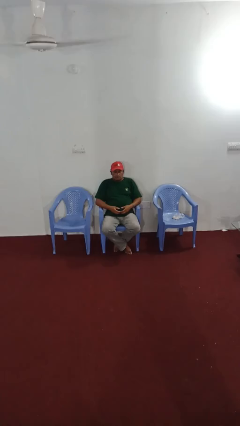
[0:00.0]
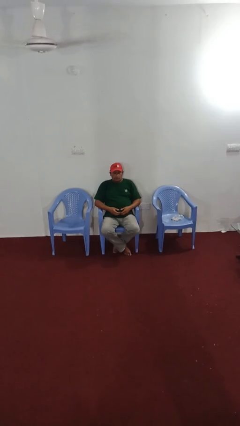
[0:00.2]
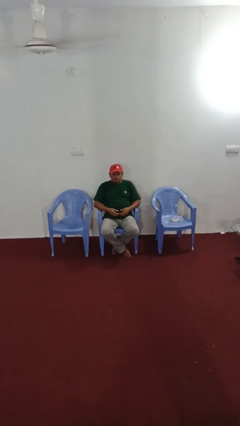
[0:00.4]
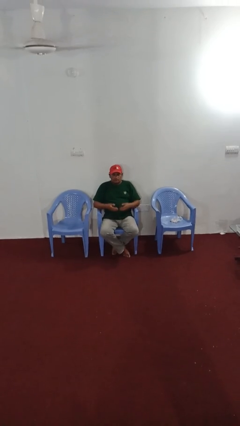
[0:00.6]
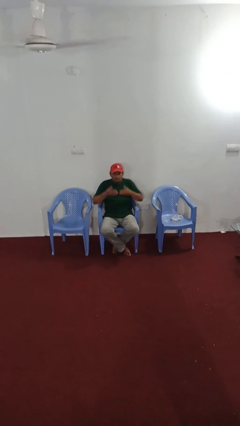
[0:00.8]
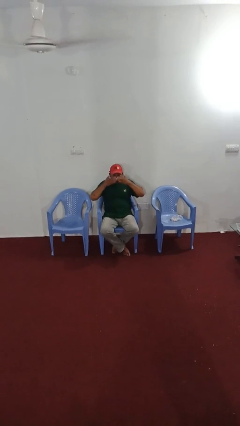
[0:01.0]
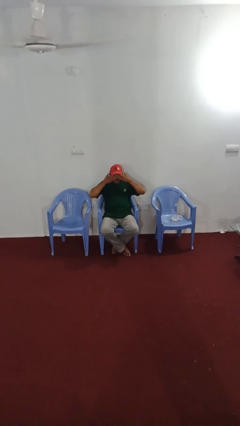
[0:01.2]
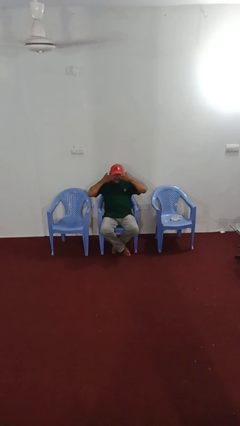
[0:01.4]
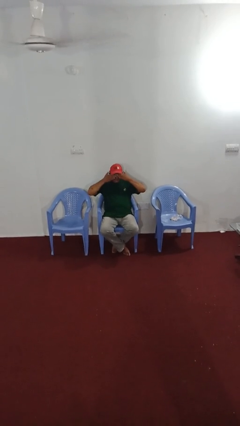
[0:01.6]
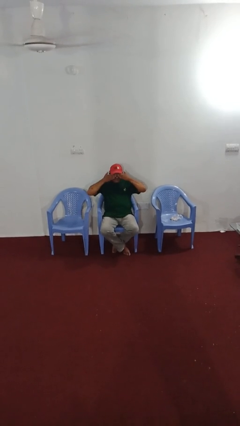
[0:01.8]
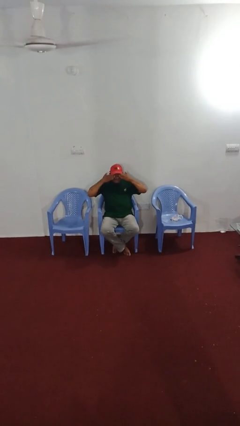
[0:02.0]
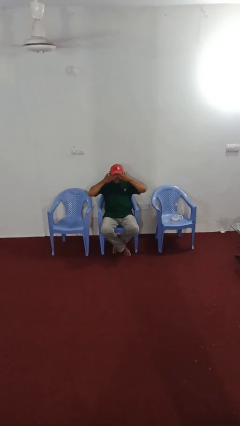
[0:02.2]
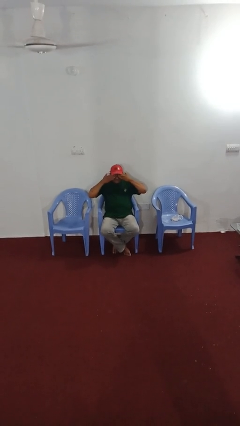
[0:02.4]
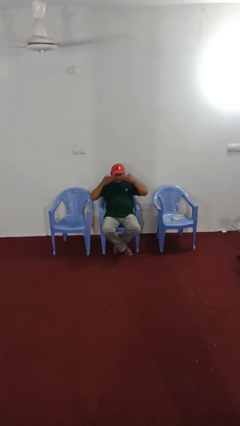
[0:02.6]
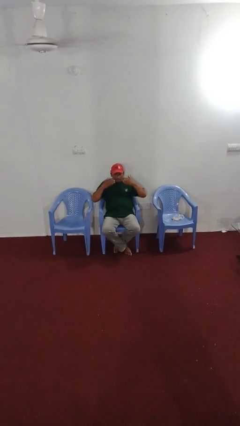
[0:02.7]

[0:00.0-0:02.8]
person rubs eyes

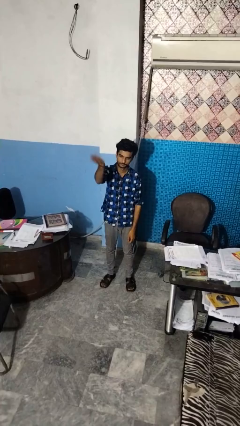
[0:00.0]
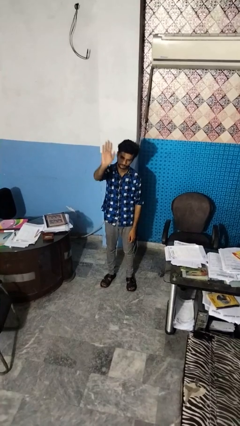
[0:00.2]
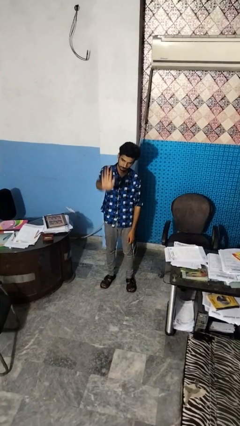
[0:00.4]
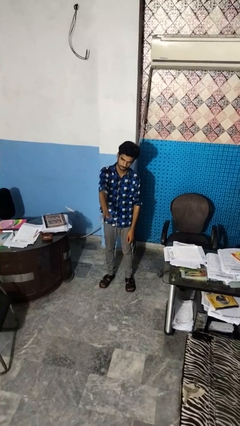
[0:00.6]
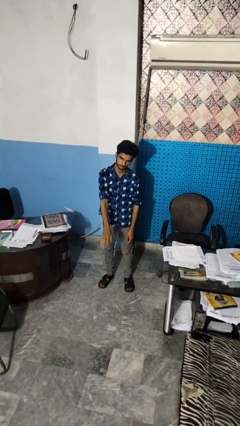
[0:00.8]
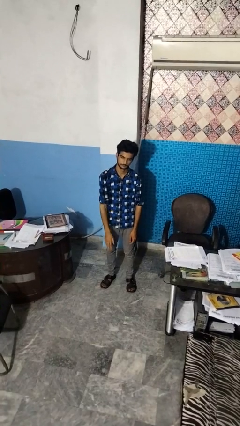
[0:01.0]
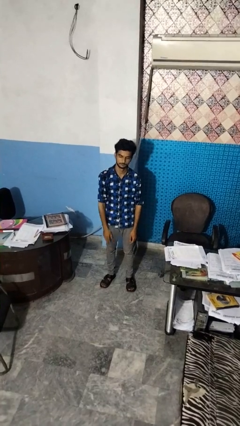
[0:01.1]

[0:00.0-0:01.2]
person gestures swipe down

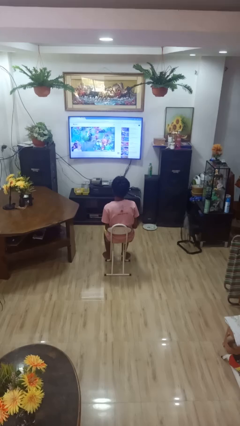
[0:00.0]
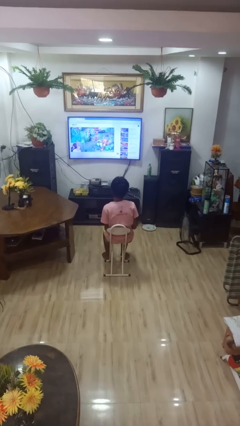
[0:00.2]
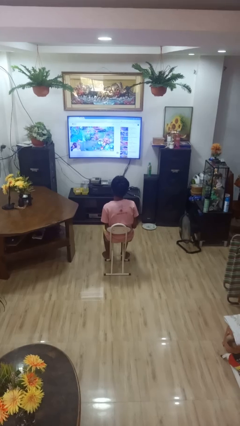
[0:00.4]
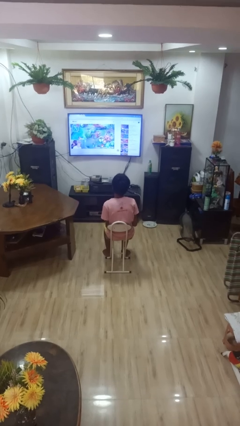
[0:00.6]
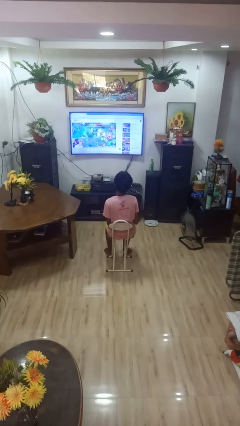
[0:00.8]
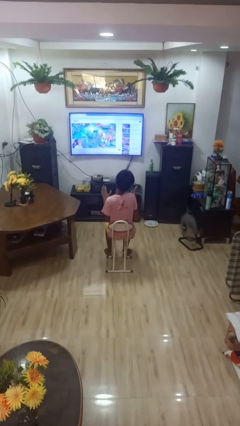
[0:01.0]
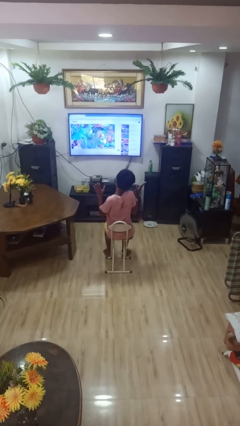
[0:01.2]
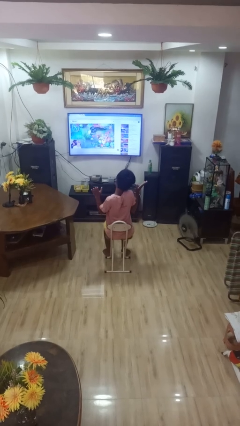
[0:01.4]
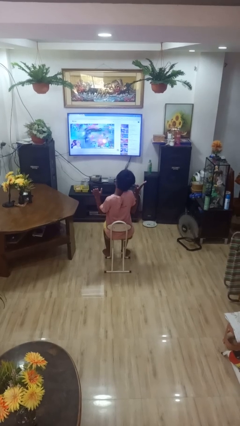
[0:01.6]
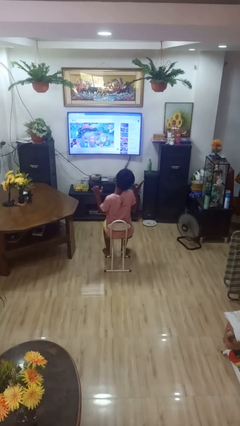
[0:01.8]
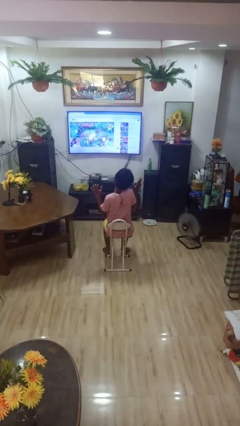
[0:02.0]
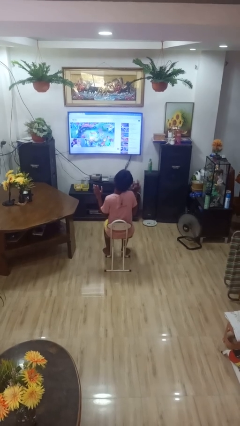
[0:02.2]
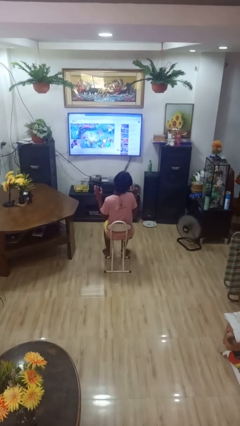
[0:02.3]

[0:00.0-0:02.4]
person shrugs

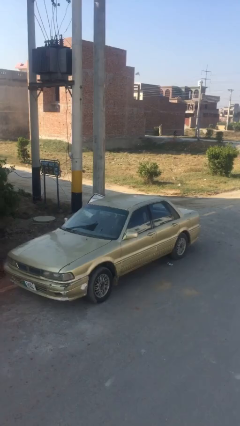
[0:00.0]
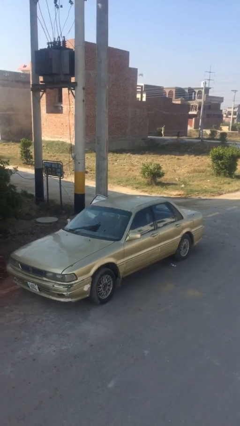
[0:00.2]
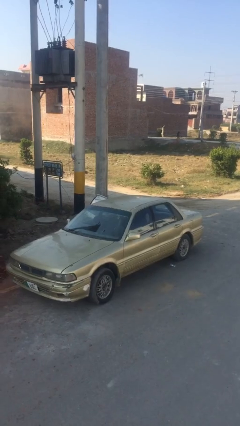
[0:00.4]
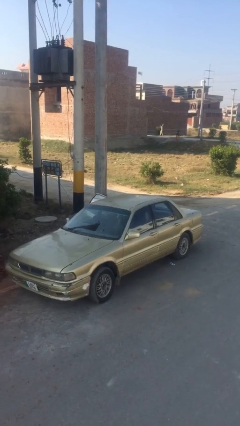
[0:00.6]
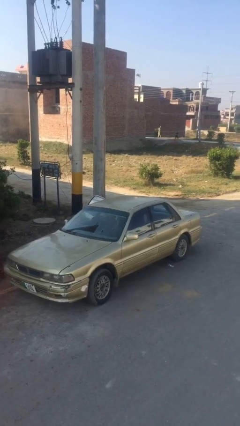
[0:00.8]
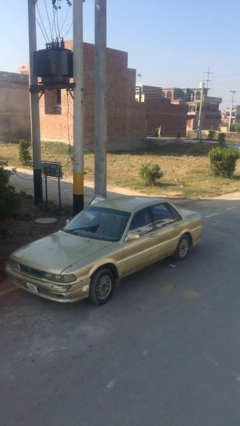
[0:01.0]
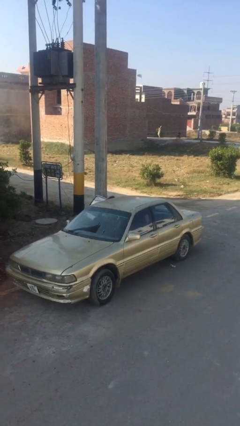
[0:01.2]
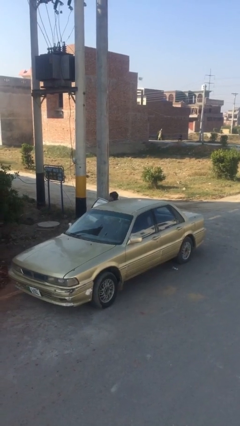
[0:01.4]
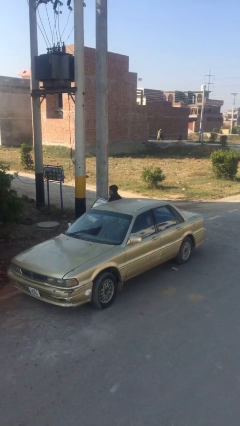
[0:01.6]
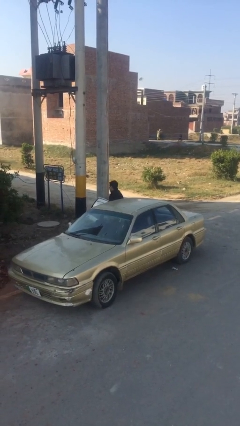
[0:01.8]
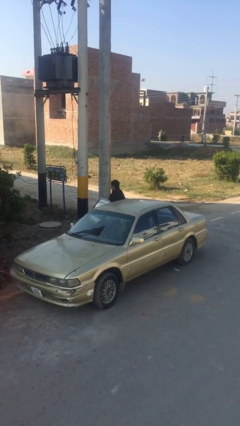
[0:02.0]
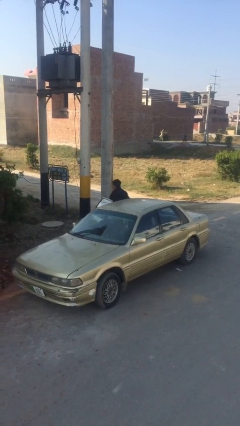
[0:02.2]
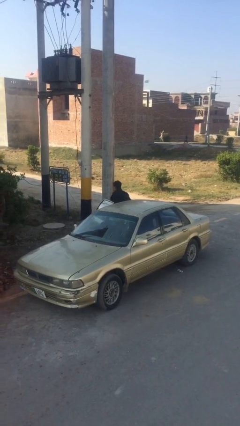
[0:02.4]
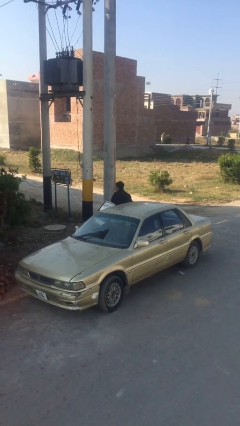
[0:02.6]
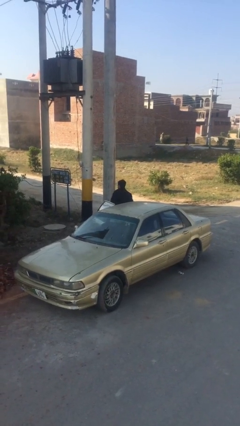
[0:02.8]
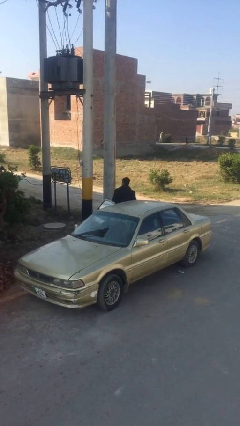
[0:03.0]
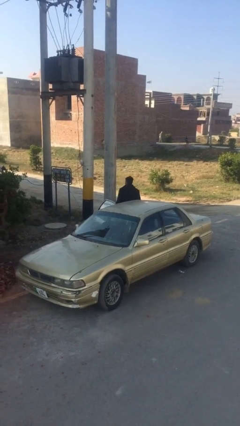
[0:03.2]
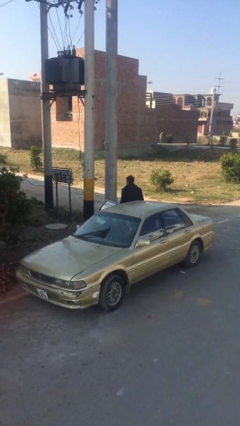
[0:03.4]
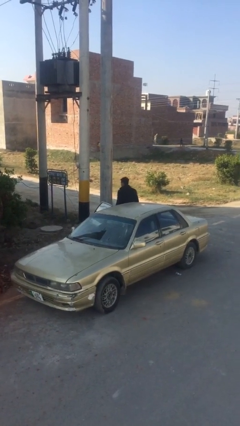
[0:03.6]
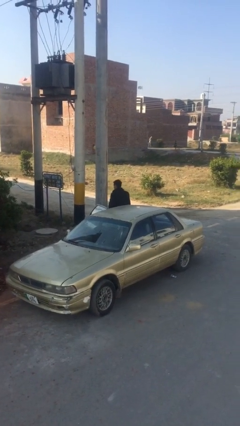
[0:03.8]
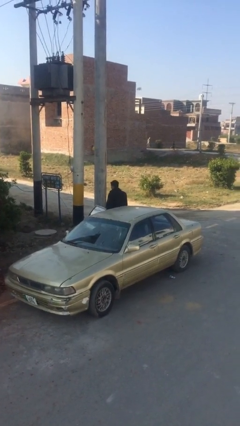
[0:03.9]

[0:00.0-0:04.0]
person exits car

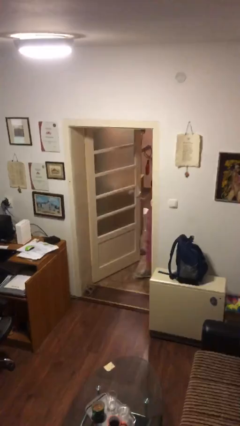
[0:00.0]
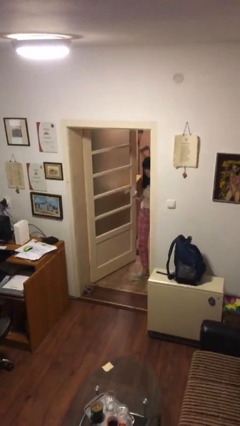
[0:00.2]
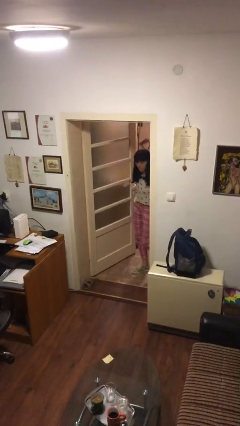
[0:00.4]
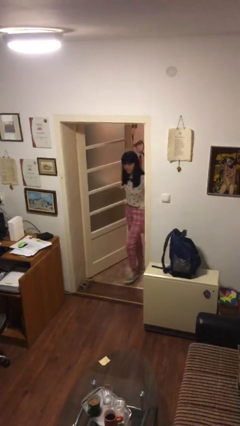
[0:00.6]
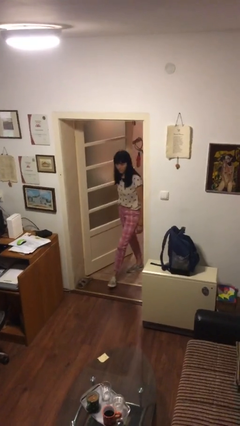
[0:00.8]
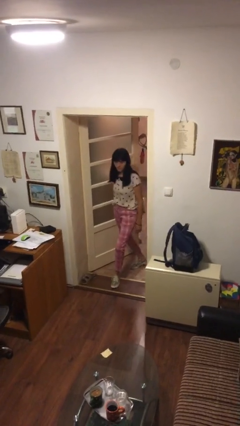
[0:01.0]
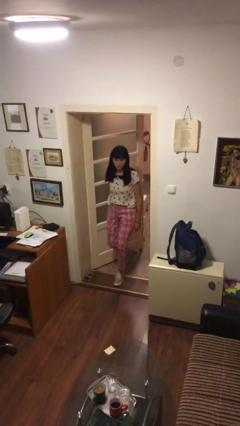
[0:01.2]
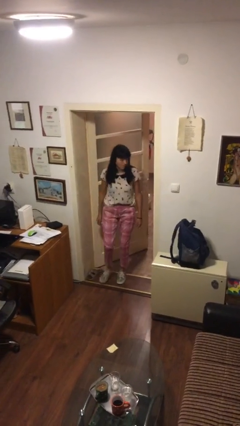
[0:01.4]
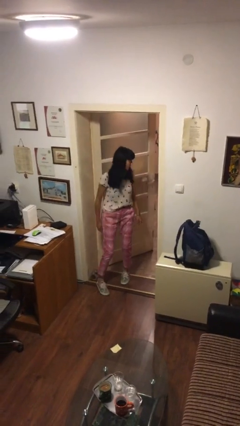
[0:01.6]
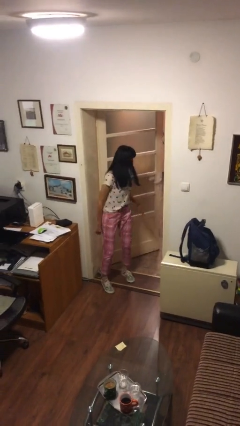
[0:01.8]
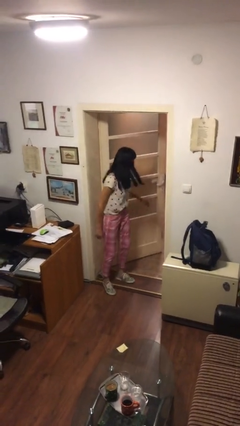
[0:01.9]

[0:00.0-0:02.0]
person enters scene through structure

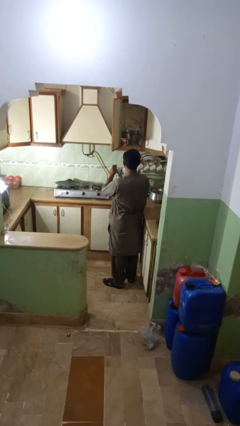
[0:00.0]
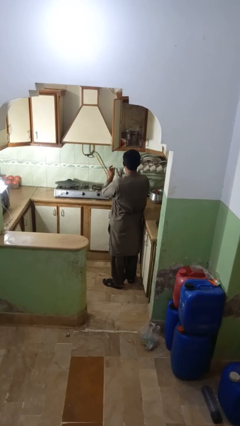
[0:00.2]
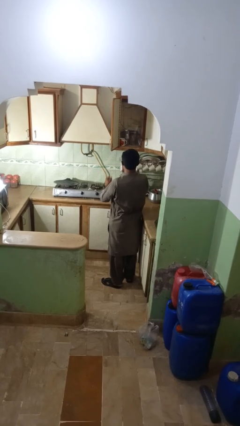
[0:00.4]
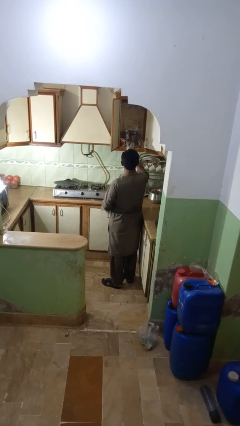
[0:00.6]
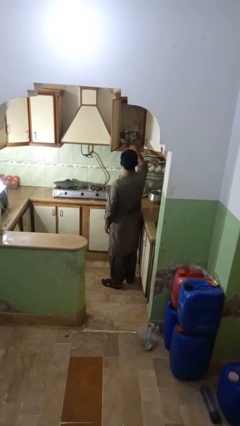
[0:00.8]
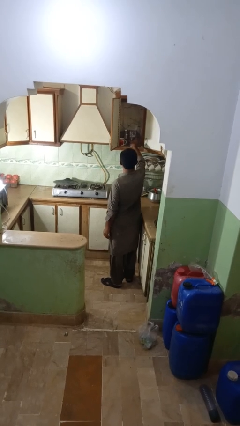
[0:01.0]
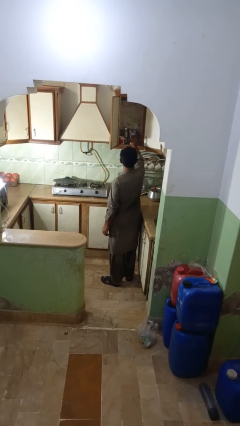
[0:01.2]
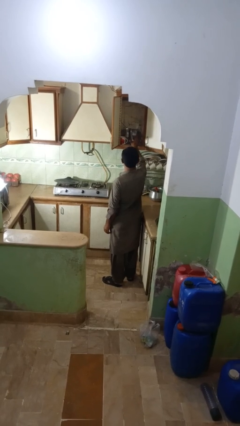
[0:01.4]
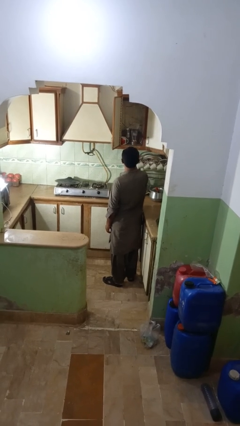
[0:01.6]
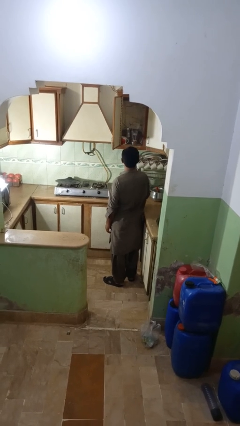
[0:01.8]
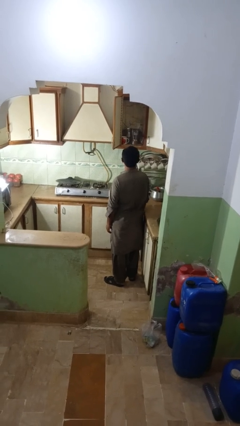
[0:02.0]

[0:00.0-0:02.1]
person puts object into kitchen drawer

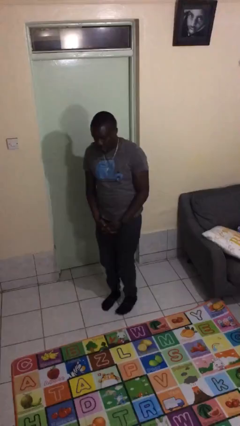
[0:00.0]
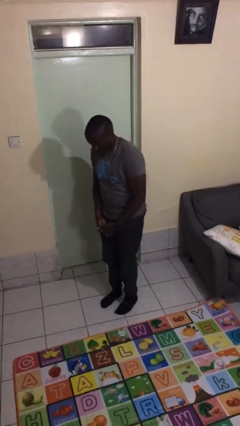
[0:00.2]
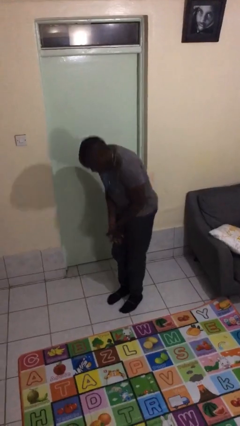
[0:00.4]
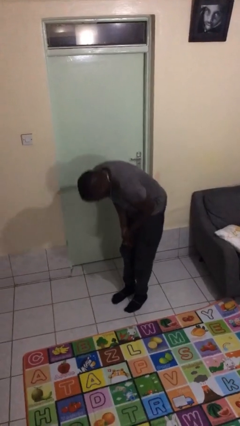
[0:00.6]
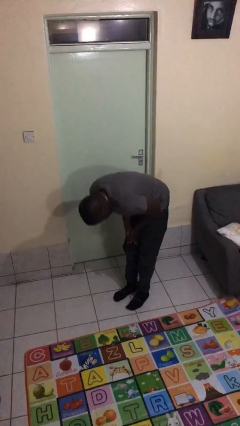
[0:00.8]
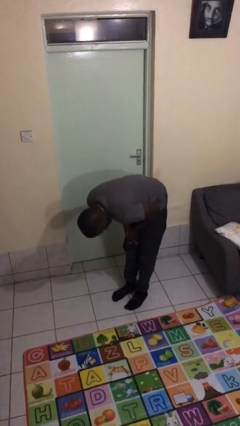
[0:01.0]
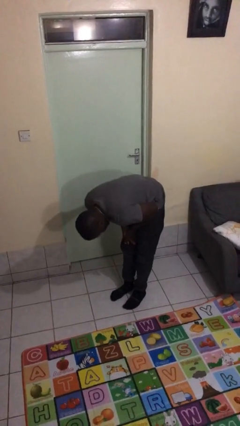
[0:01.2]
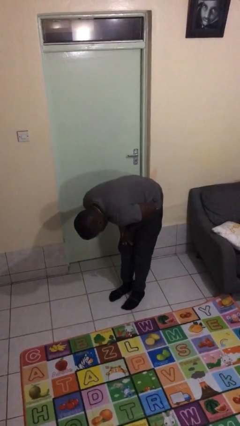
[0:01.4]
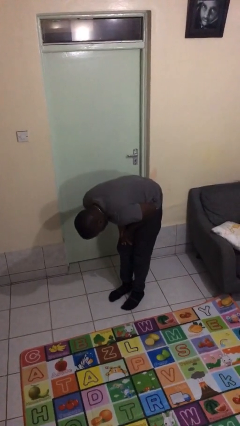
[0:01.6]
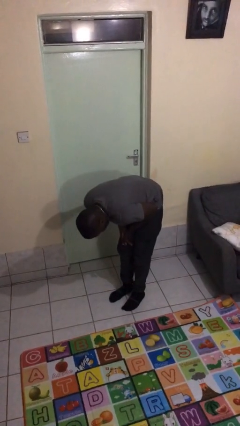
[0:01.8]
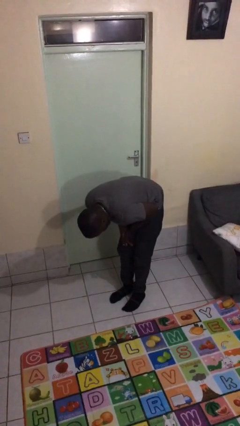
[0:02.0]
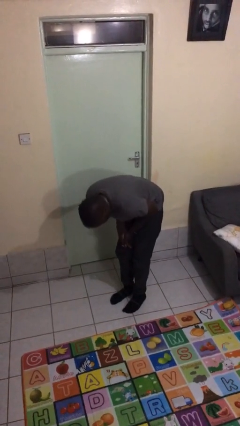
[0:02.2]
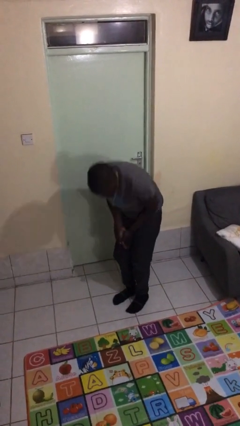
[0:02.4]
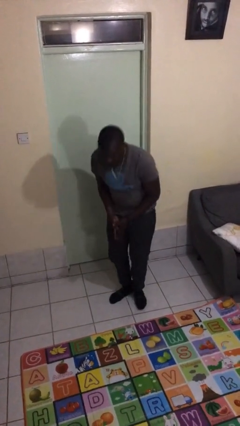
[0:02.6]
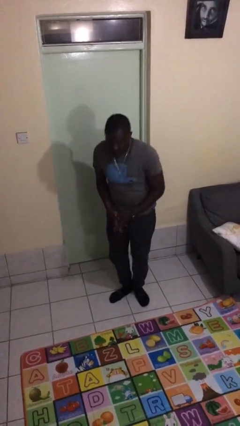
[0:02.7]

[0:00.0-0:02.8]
person bows
